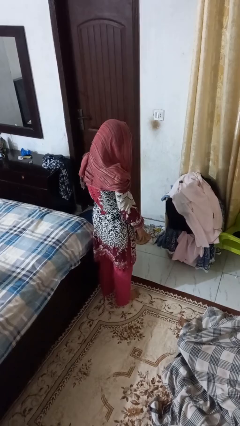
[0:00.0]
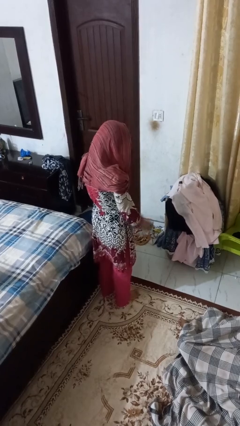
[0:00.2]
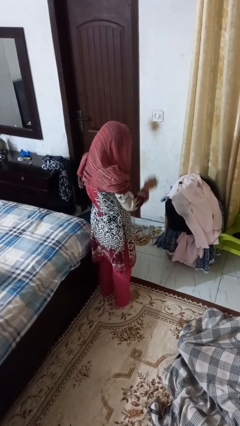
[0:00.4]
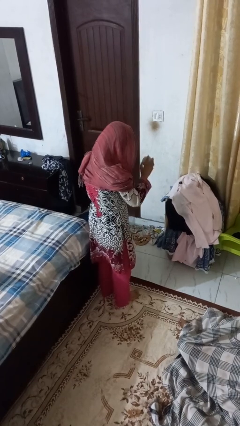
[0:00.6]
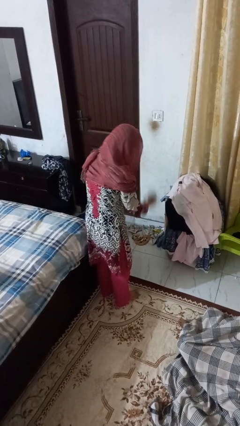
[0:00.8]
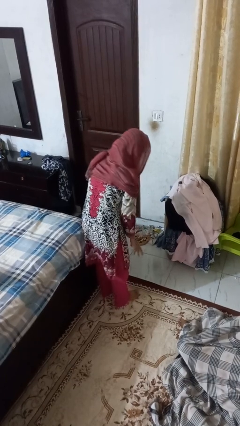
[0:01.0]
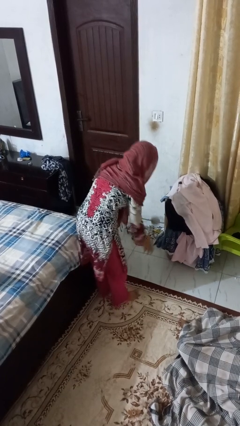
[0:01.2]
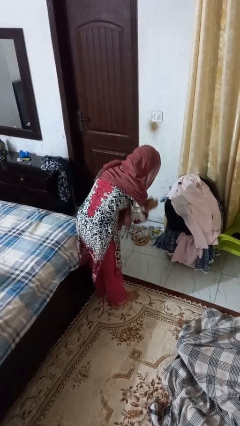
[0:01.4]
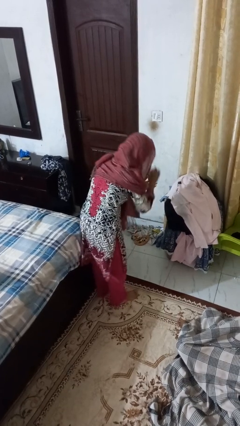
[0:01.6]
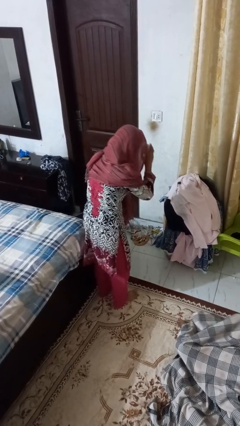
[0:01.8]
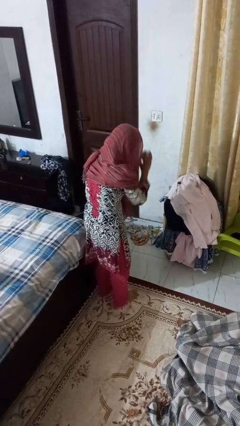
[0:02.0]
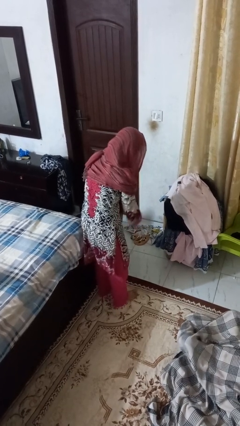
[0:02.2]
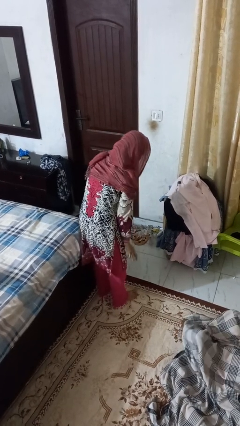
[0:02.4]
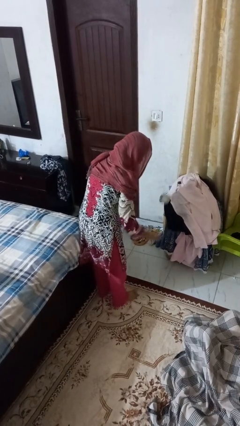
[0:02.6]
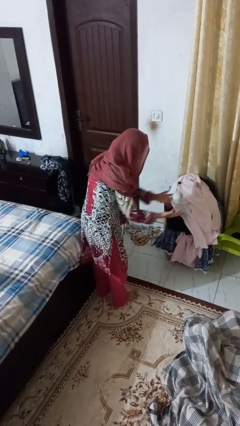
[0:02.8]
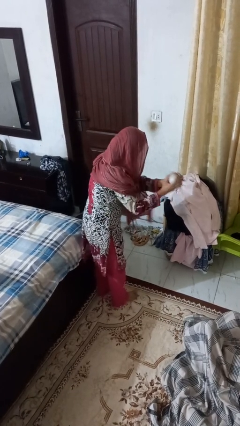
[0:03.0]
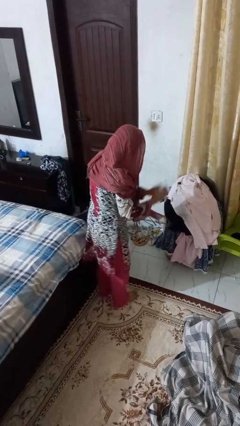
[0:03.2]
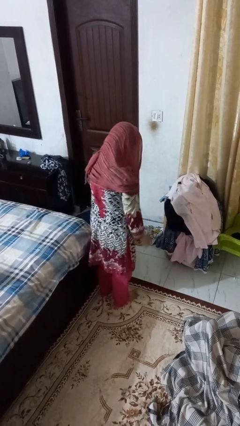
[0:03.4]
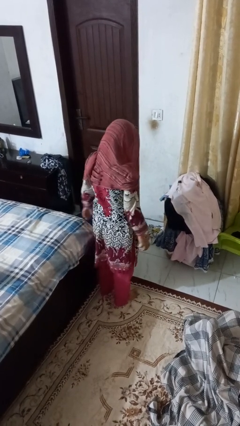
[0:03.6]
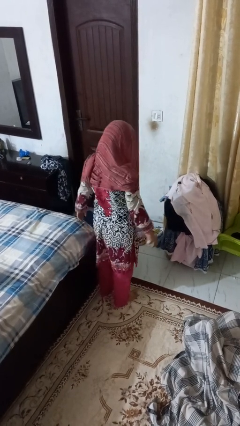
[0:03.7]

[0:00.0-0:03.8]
person bounces ball on floor

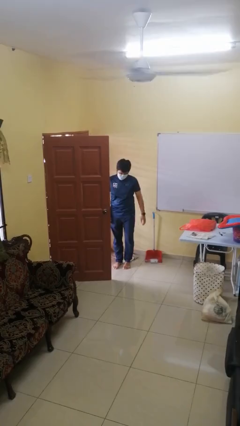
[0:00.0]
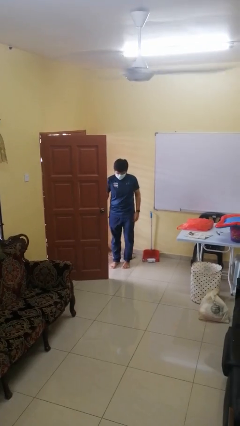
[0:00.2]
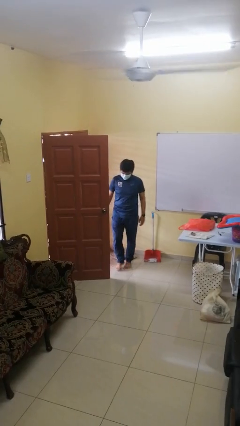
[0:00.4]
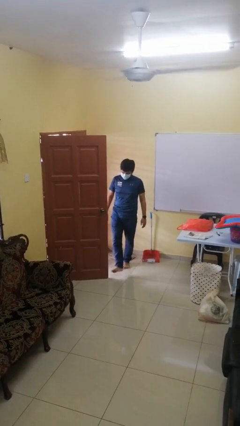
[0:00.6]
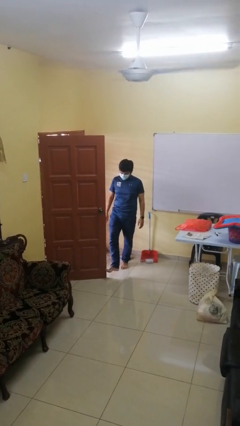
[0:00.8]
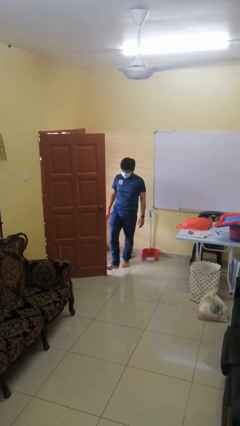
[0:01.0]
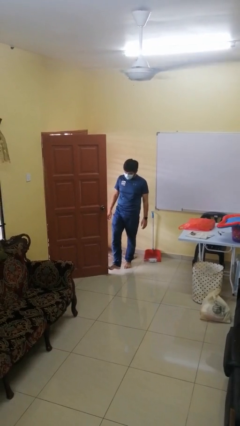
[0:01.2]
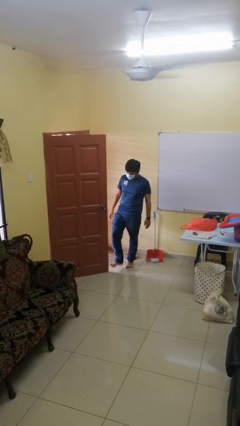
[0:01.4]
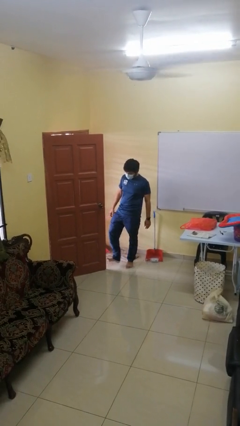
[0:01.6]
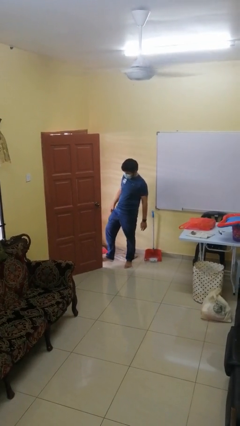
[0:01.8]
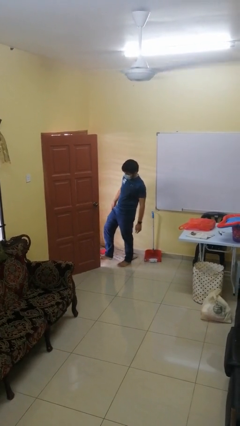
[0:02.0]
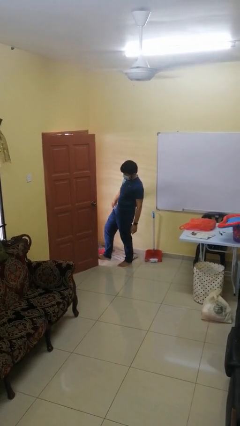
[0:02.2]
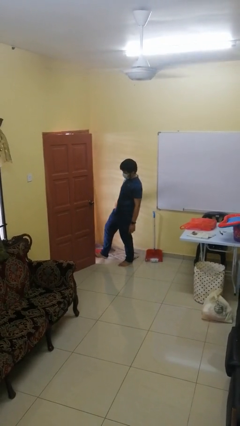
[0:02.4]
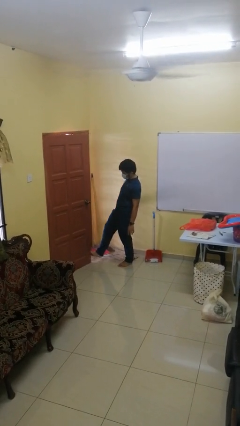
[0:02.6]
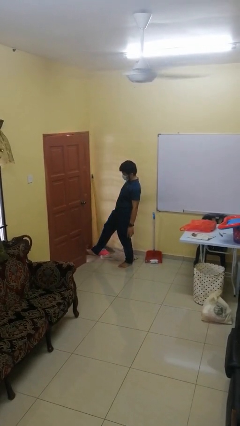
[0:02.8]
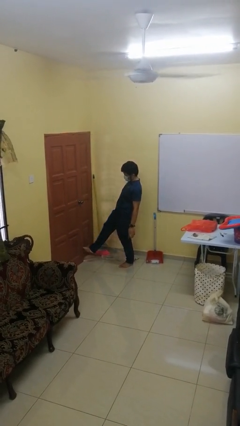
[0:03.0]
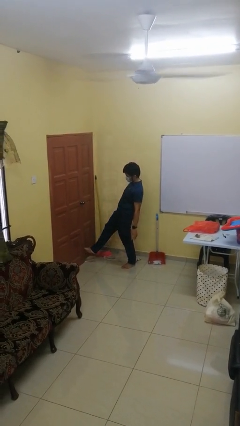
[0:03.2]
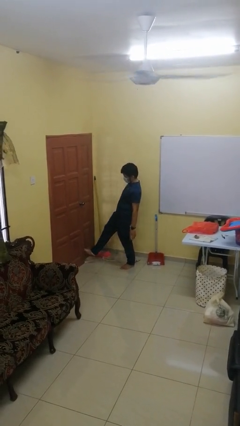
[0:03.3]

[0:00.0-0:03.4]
person closes door with foot

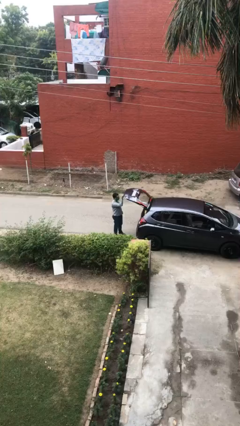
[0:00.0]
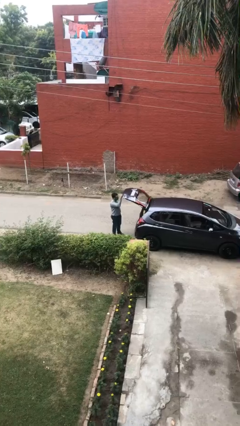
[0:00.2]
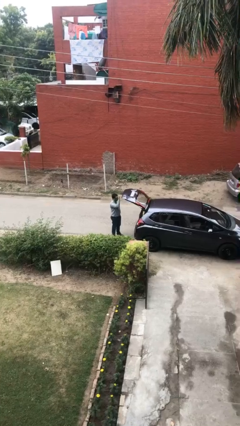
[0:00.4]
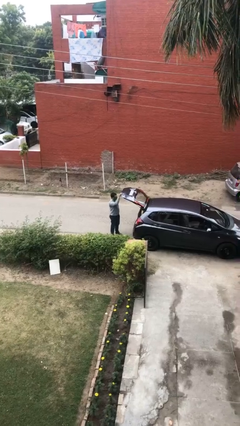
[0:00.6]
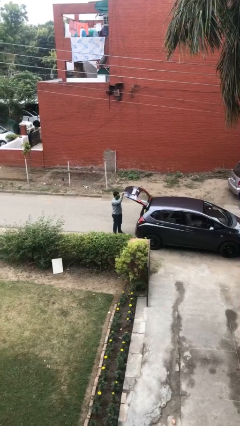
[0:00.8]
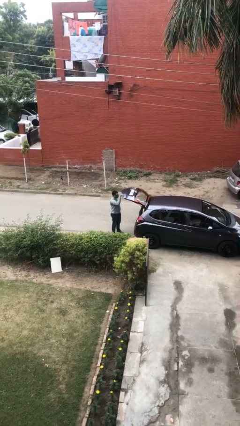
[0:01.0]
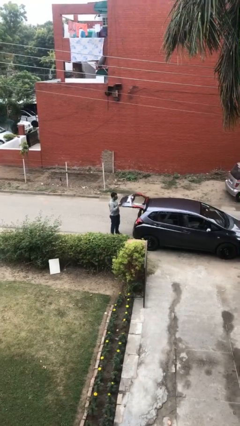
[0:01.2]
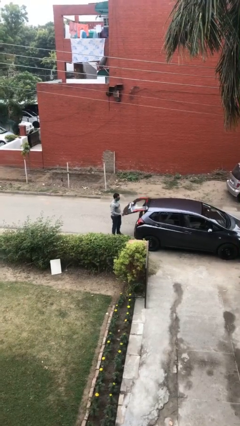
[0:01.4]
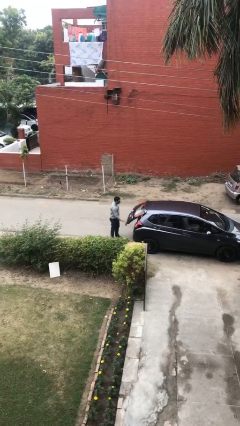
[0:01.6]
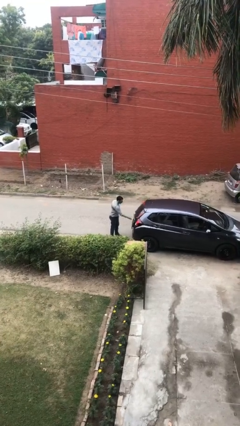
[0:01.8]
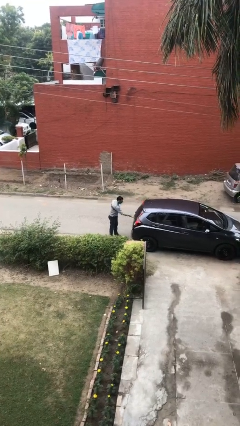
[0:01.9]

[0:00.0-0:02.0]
person closes car trunk

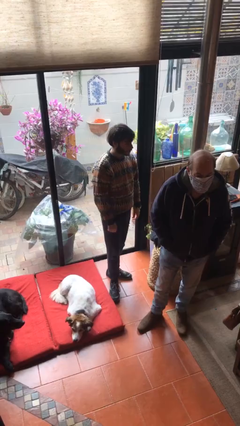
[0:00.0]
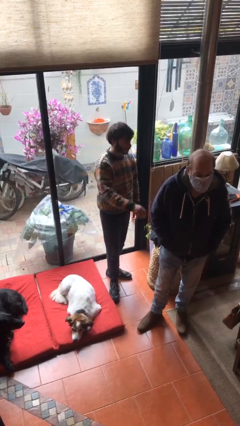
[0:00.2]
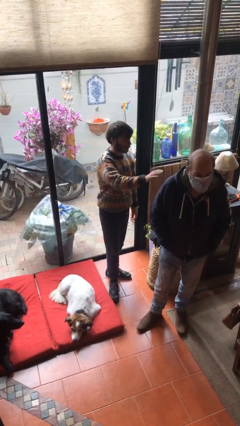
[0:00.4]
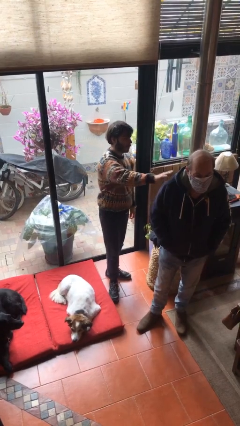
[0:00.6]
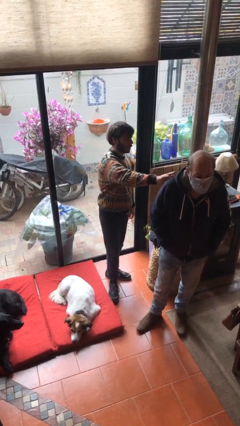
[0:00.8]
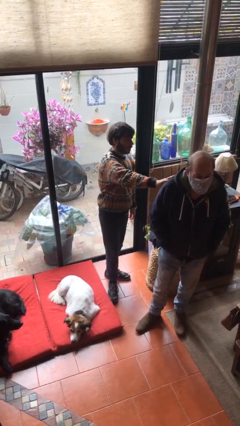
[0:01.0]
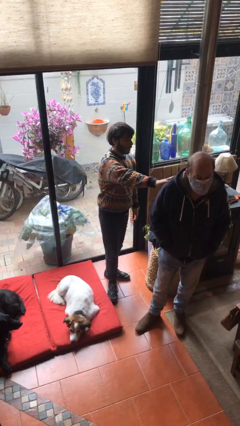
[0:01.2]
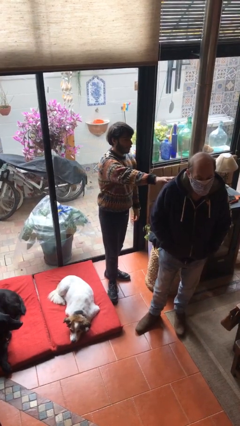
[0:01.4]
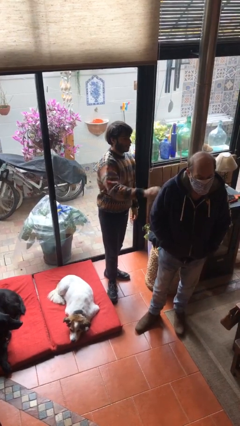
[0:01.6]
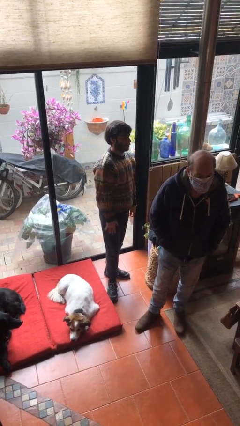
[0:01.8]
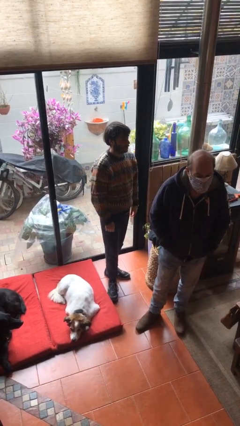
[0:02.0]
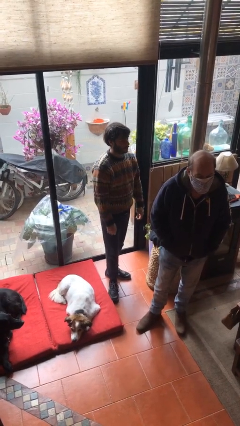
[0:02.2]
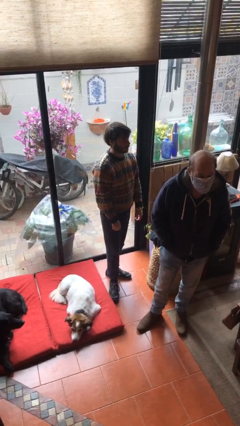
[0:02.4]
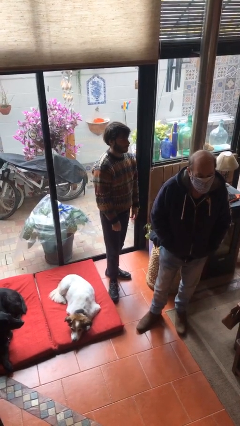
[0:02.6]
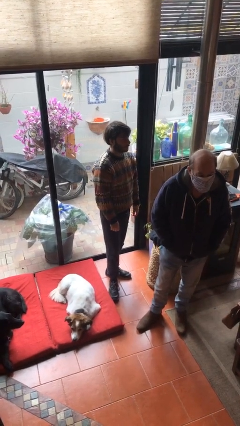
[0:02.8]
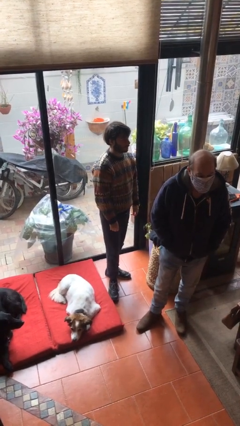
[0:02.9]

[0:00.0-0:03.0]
person touches back of person

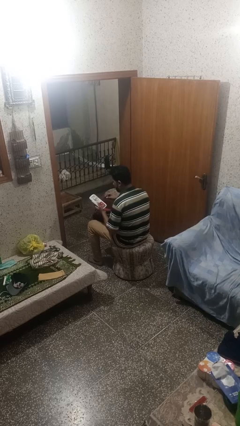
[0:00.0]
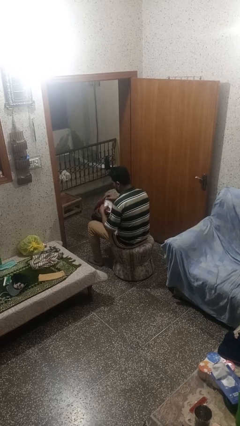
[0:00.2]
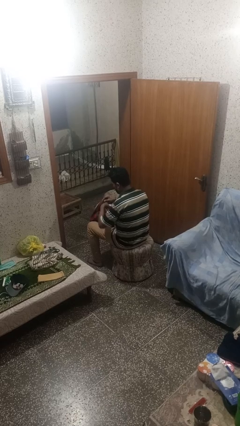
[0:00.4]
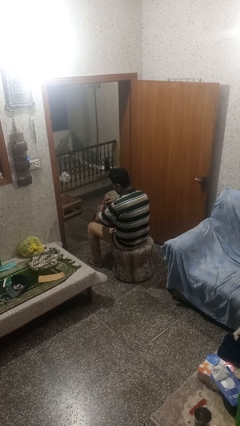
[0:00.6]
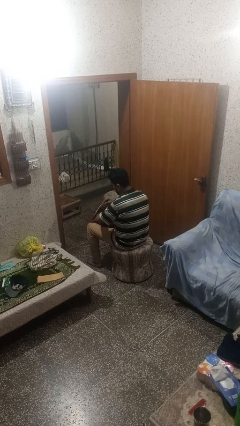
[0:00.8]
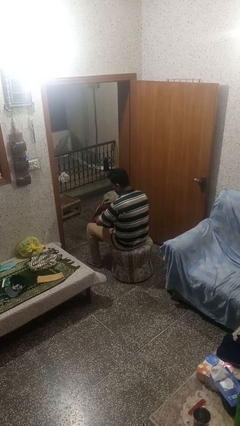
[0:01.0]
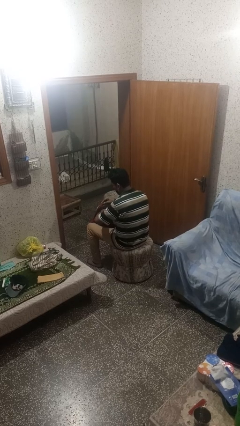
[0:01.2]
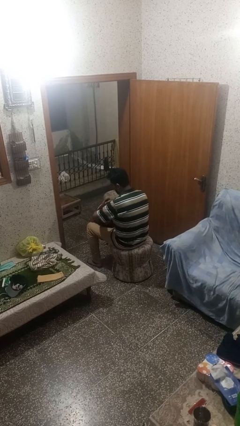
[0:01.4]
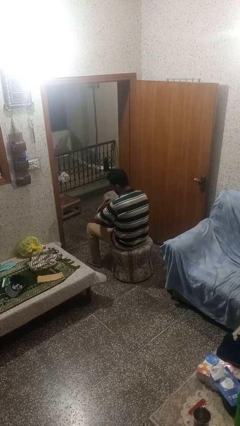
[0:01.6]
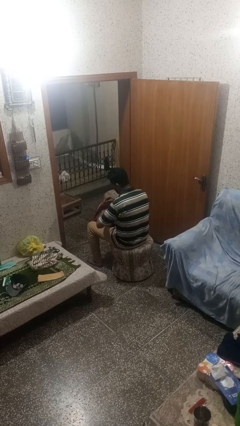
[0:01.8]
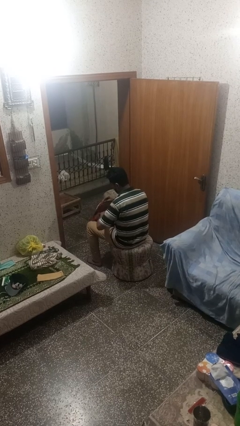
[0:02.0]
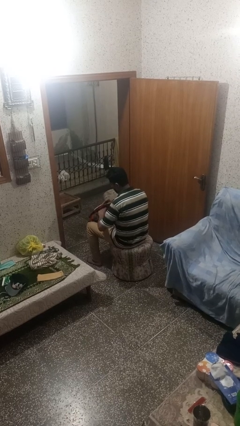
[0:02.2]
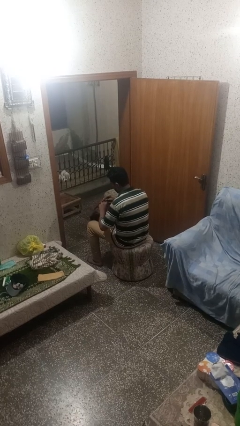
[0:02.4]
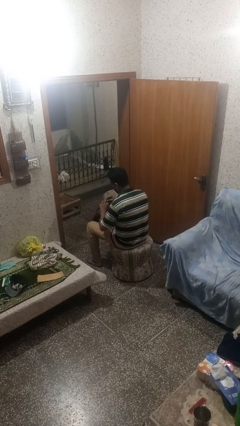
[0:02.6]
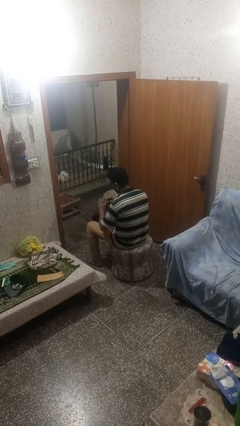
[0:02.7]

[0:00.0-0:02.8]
person puts object into backpack

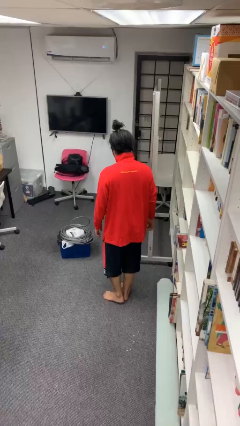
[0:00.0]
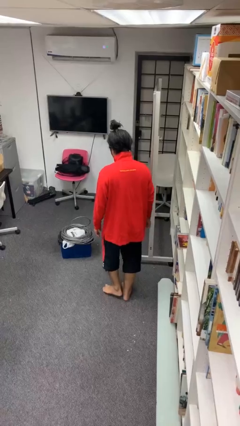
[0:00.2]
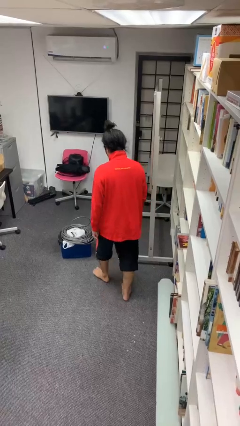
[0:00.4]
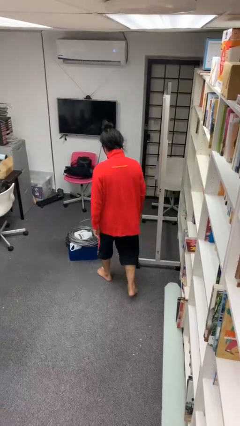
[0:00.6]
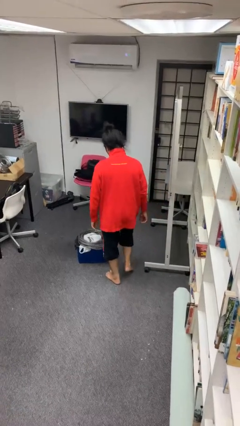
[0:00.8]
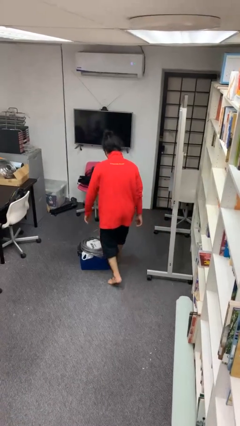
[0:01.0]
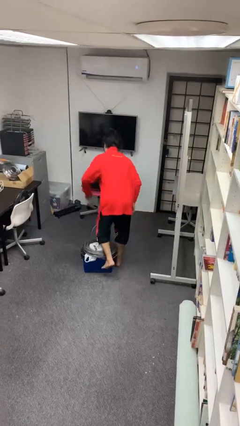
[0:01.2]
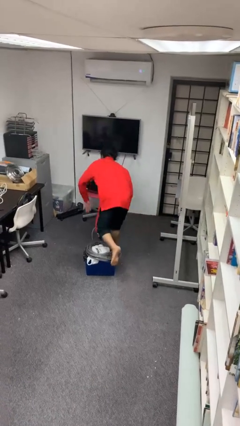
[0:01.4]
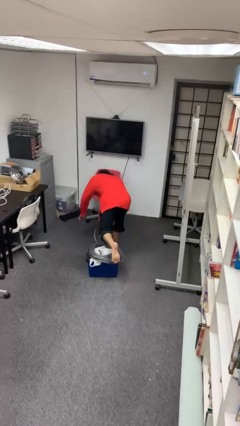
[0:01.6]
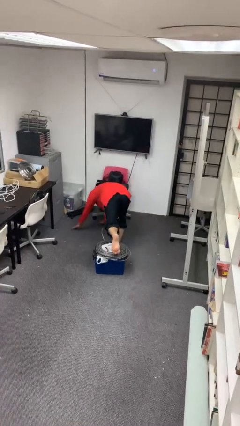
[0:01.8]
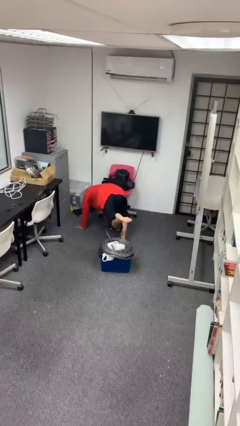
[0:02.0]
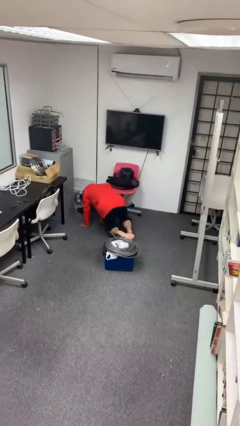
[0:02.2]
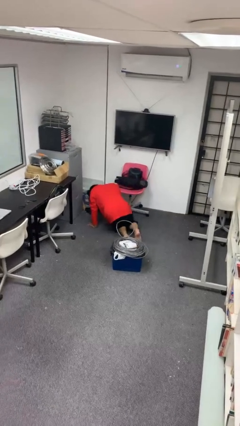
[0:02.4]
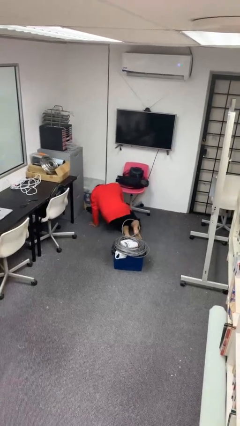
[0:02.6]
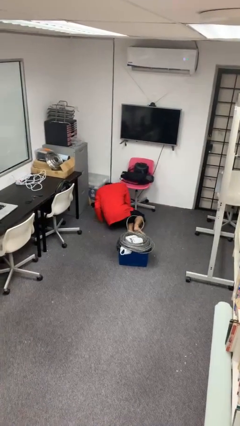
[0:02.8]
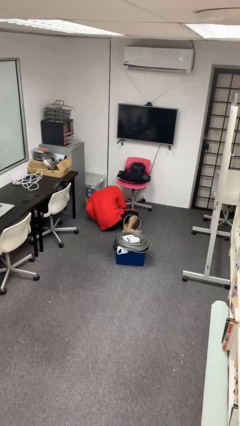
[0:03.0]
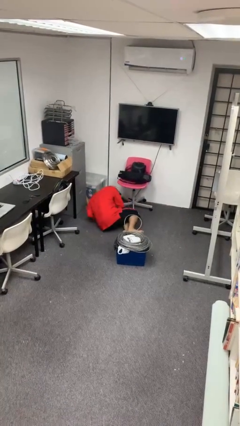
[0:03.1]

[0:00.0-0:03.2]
person trips on object on floor
